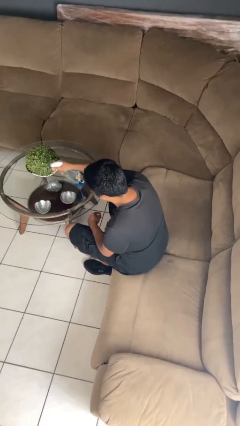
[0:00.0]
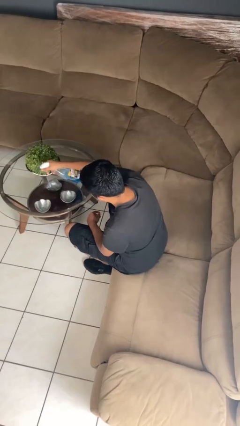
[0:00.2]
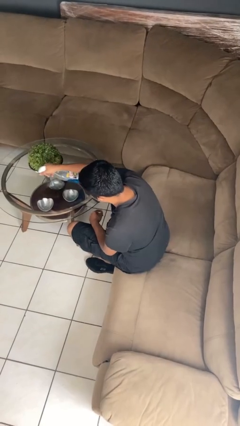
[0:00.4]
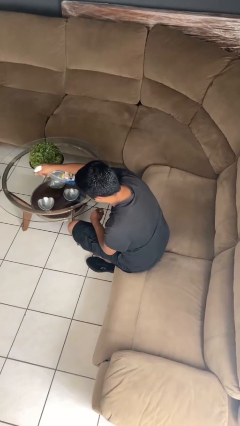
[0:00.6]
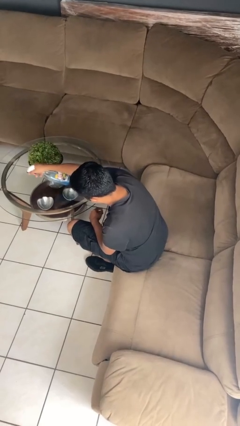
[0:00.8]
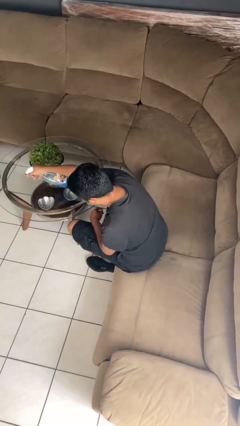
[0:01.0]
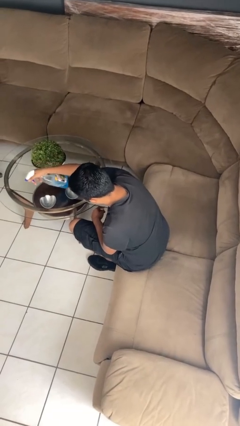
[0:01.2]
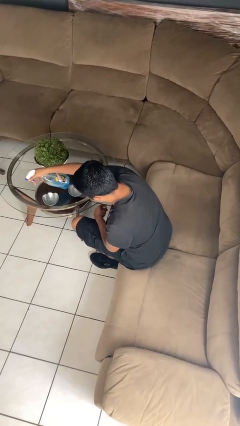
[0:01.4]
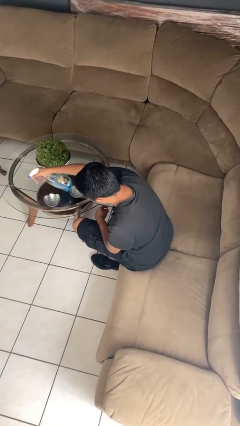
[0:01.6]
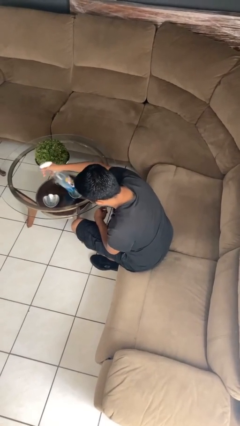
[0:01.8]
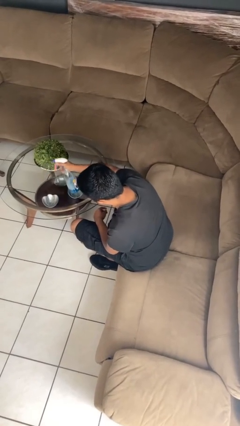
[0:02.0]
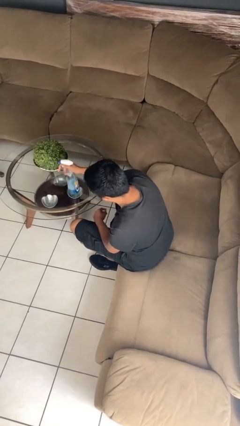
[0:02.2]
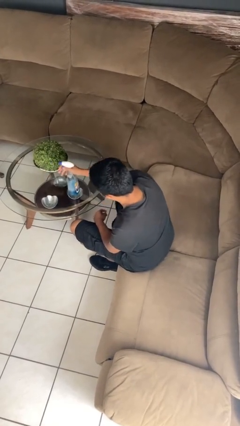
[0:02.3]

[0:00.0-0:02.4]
person sprays from bottle

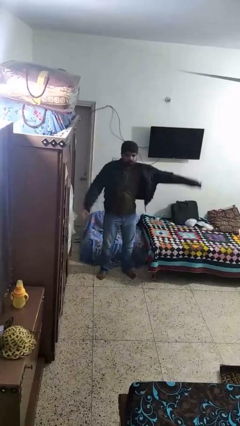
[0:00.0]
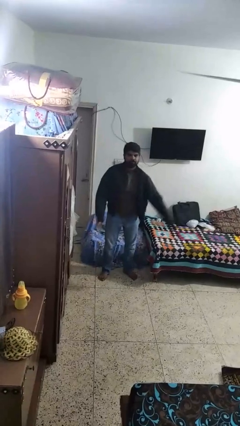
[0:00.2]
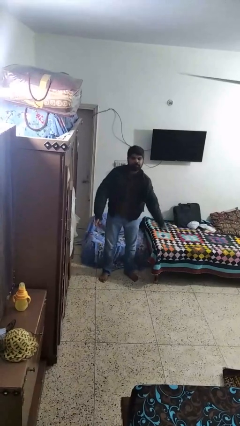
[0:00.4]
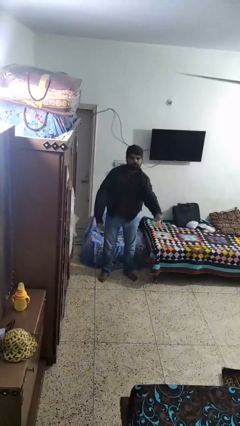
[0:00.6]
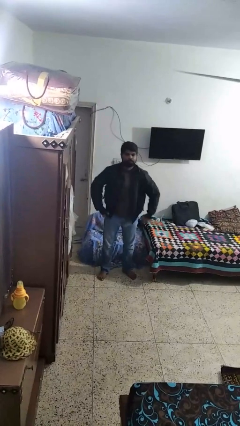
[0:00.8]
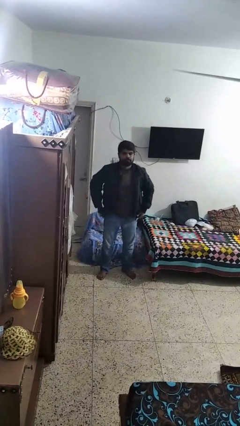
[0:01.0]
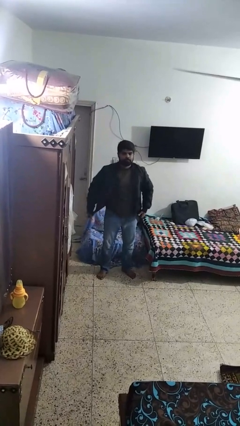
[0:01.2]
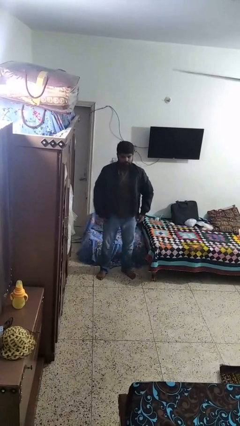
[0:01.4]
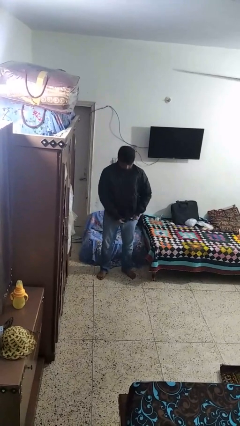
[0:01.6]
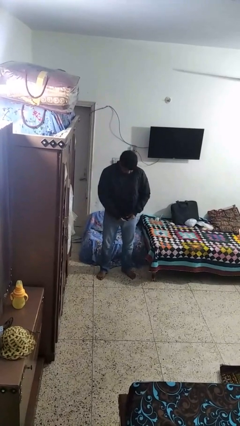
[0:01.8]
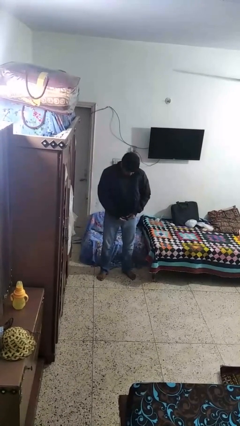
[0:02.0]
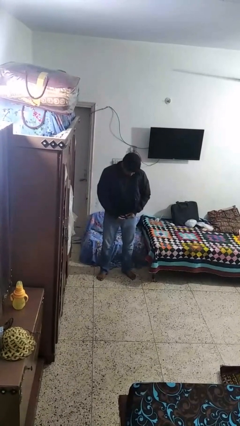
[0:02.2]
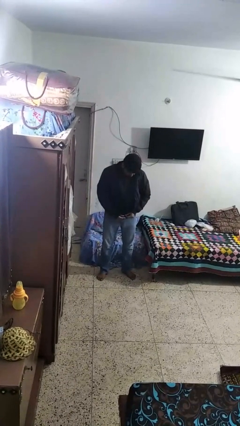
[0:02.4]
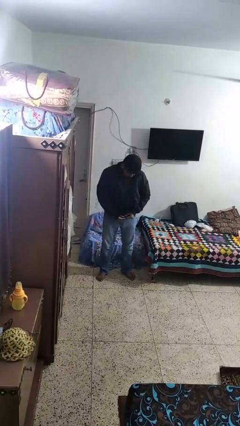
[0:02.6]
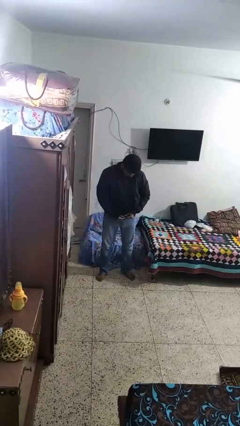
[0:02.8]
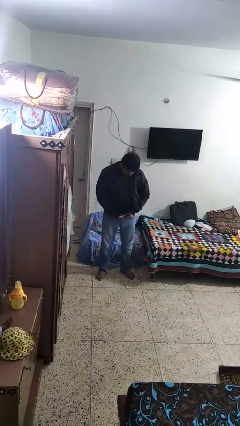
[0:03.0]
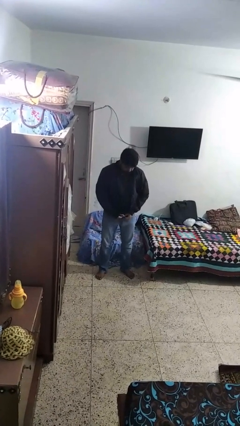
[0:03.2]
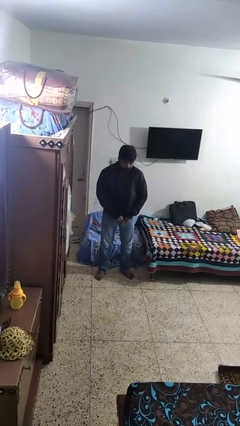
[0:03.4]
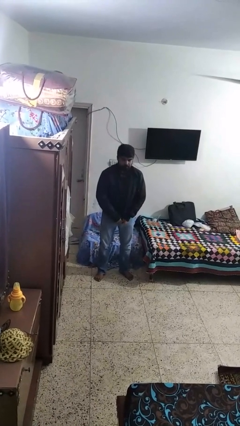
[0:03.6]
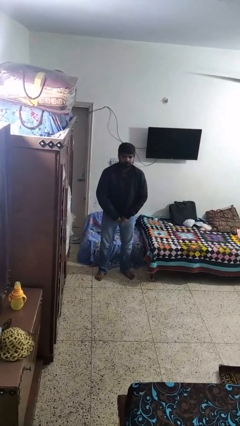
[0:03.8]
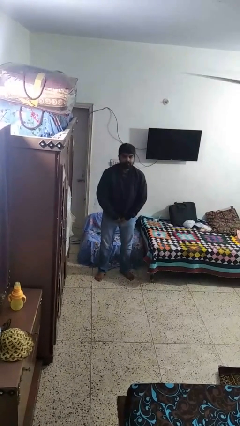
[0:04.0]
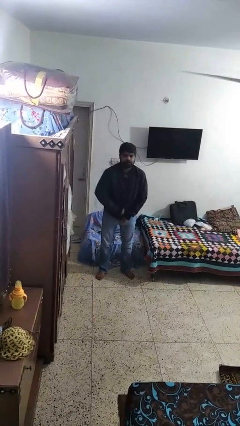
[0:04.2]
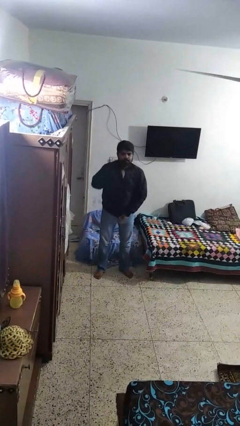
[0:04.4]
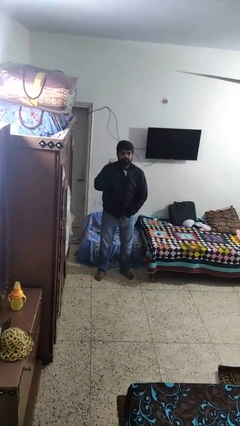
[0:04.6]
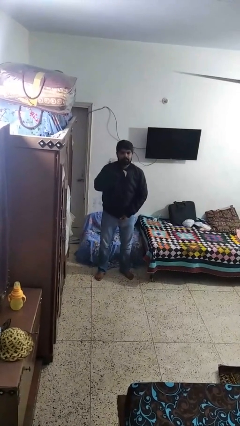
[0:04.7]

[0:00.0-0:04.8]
person zips up jacket

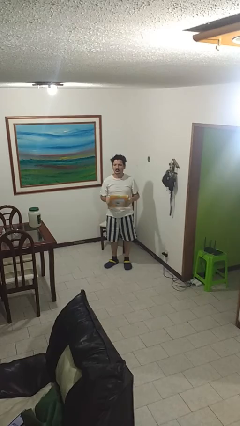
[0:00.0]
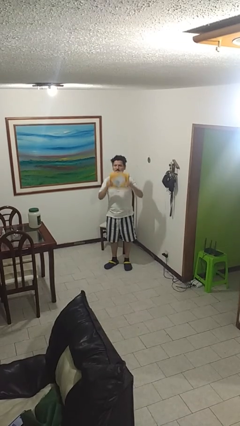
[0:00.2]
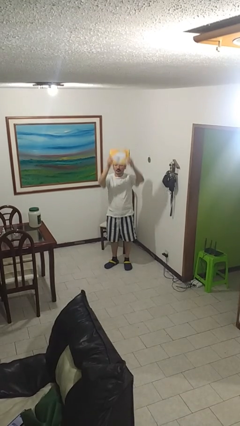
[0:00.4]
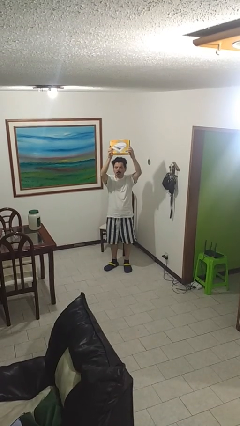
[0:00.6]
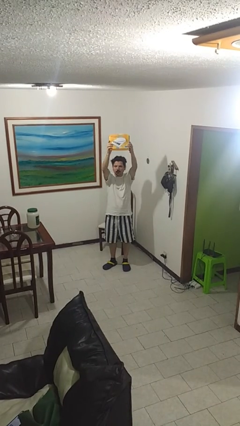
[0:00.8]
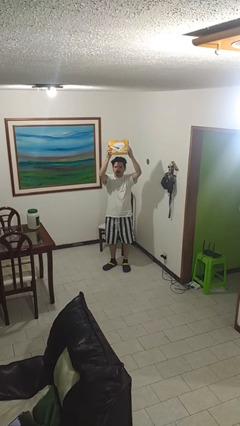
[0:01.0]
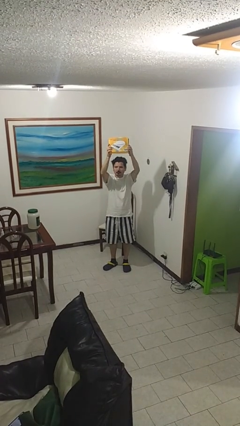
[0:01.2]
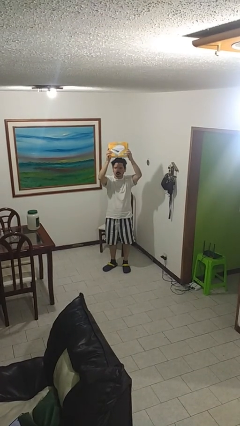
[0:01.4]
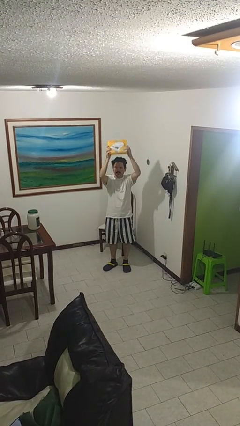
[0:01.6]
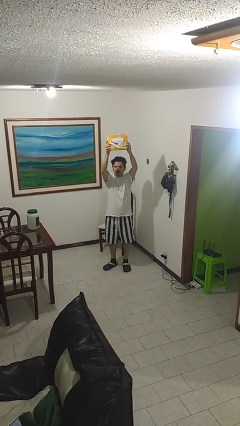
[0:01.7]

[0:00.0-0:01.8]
person holds object above head

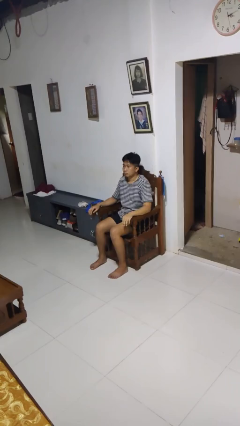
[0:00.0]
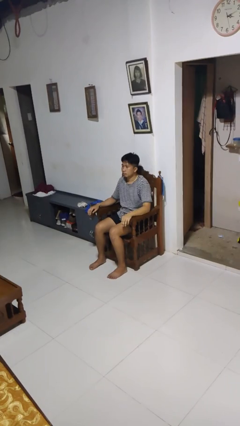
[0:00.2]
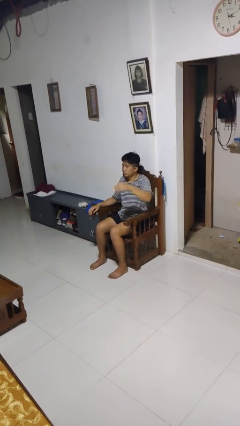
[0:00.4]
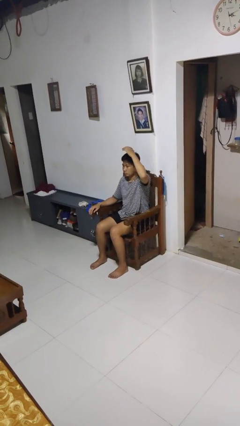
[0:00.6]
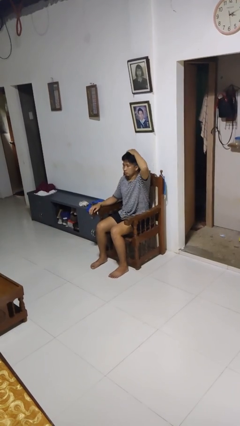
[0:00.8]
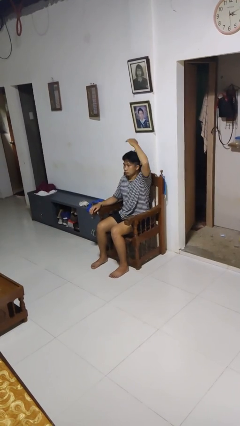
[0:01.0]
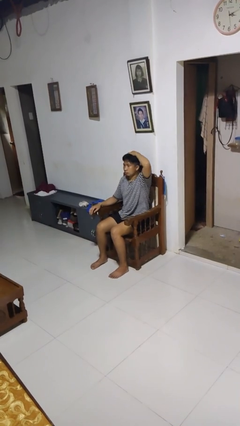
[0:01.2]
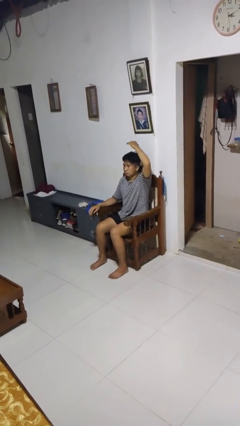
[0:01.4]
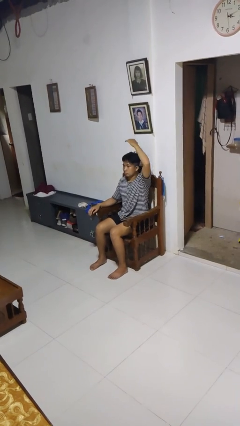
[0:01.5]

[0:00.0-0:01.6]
person pats head

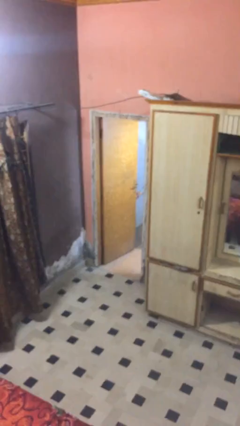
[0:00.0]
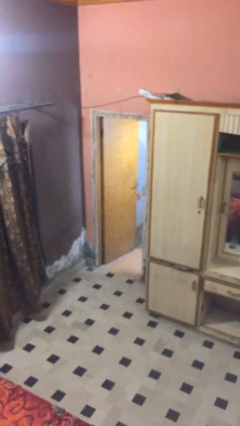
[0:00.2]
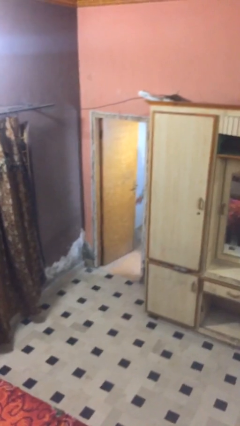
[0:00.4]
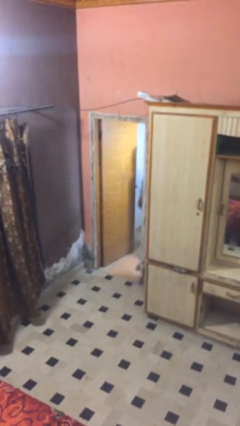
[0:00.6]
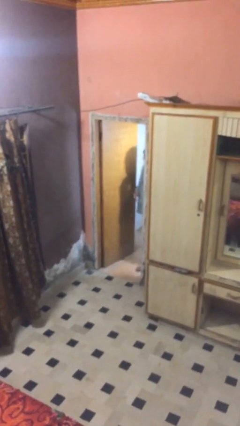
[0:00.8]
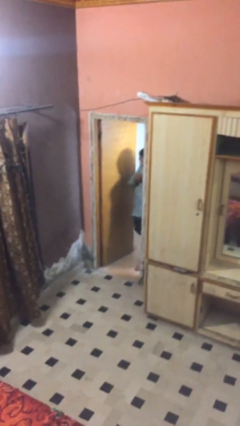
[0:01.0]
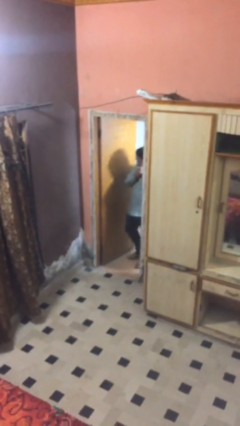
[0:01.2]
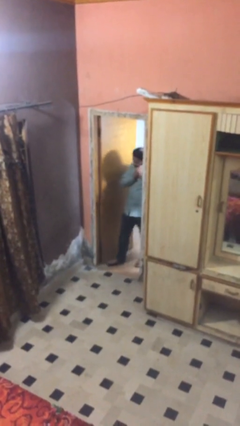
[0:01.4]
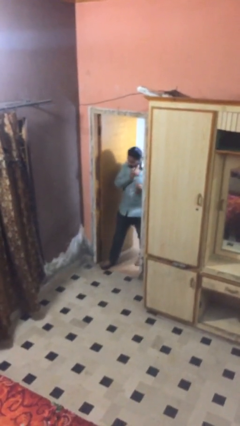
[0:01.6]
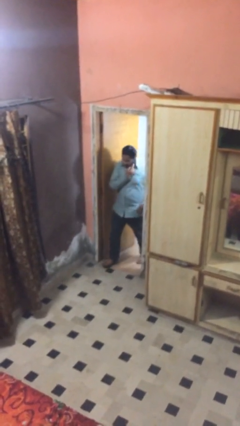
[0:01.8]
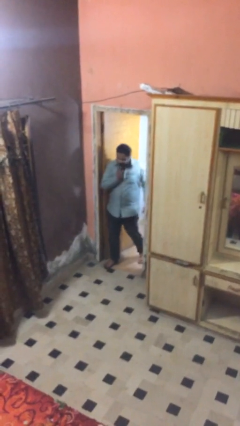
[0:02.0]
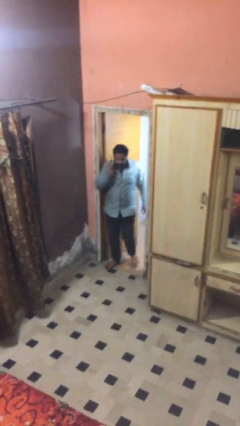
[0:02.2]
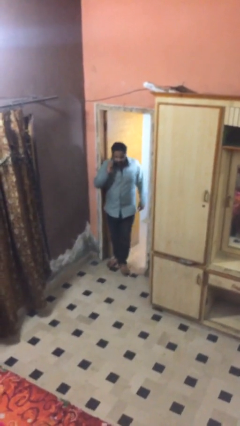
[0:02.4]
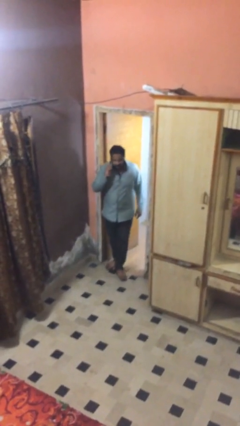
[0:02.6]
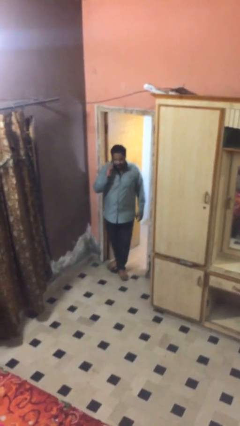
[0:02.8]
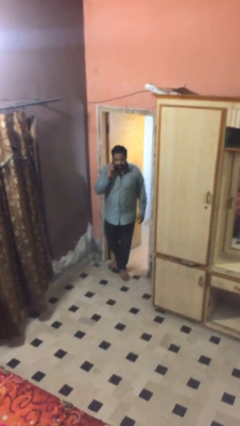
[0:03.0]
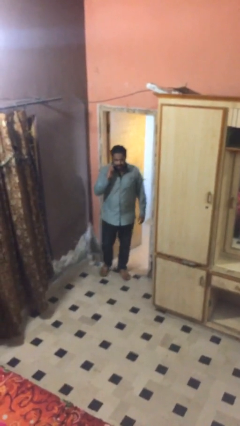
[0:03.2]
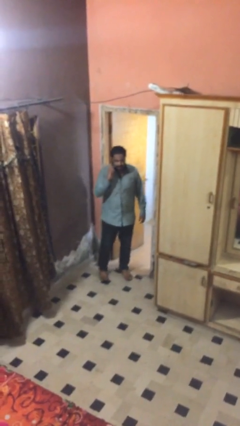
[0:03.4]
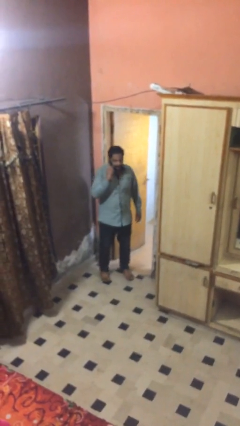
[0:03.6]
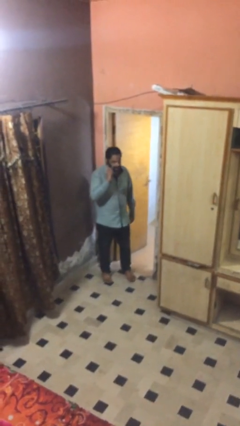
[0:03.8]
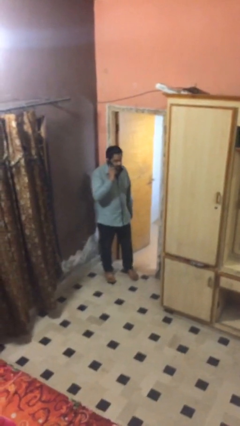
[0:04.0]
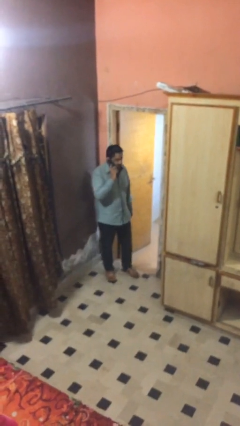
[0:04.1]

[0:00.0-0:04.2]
person enters scene through structure

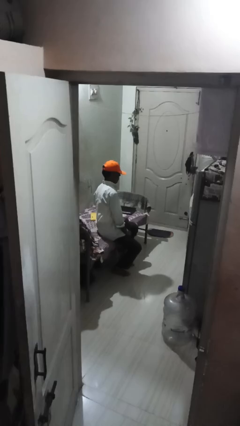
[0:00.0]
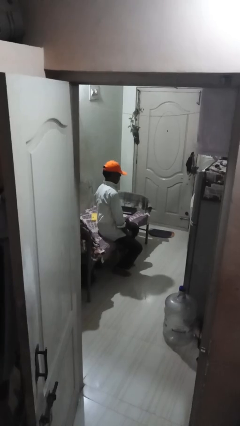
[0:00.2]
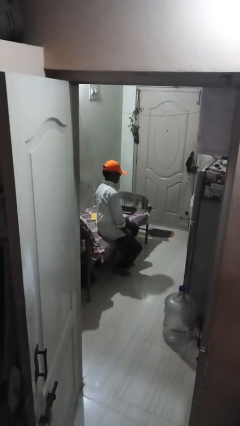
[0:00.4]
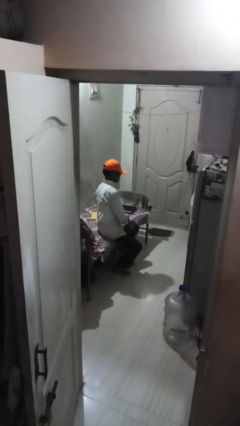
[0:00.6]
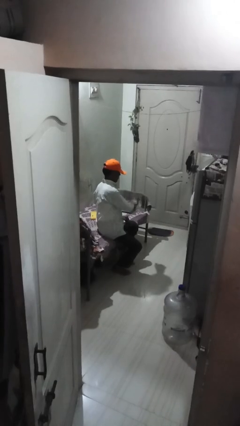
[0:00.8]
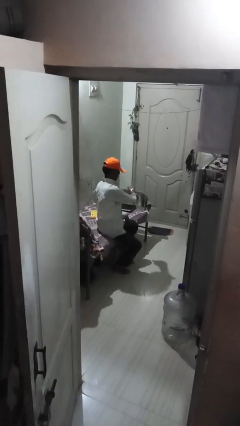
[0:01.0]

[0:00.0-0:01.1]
person looks at wristwatch

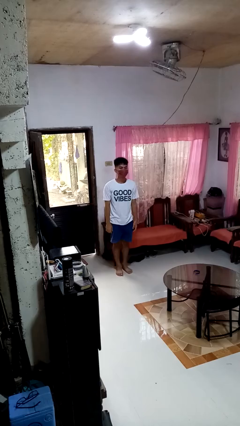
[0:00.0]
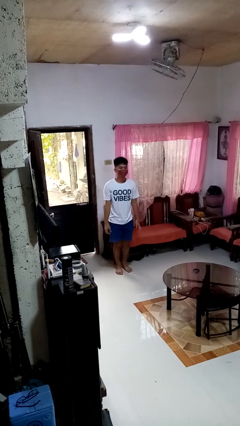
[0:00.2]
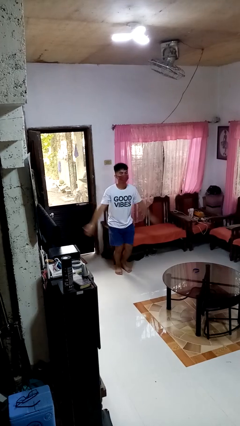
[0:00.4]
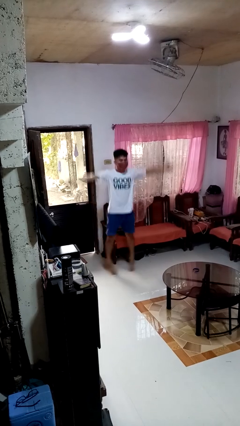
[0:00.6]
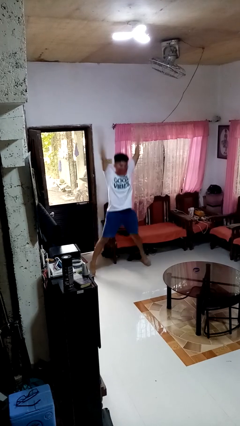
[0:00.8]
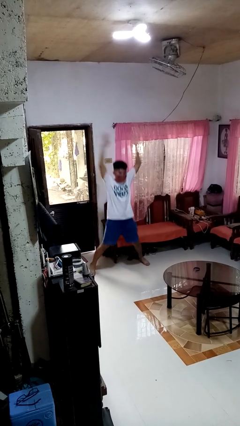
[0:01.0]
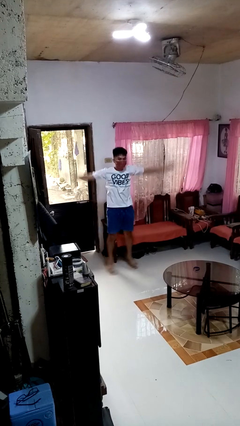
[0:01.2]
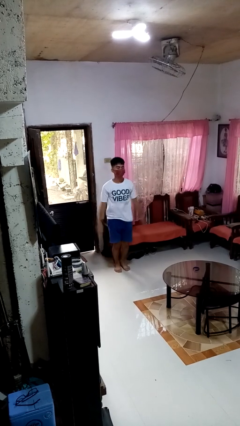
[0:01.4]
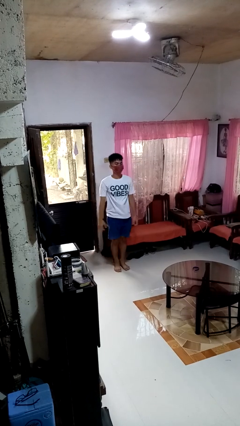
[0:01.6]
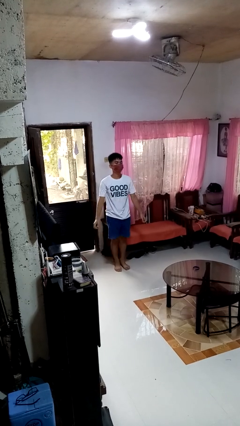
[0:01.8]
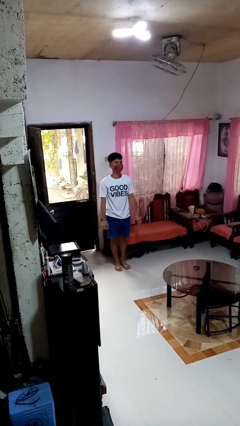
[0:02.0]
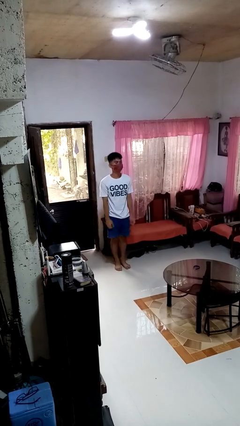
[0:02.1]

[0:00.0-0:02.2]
person exercises with jumping jacks
